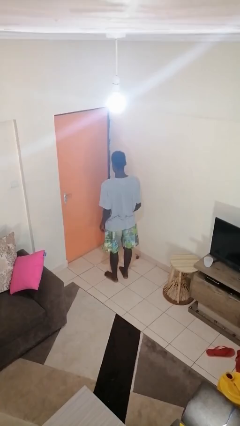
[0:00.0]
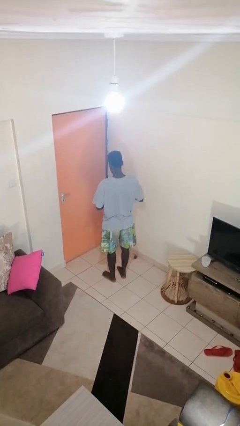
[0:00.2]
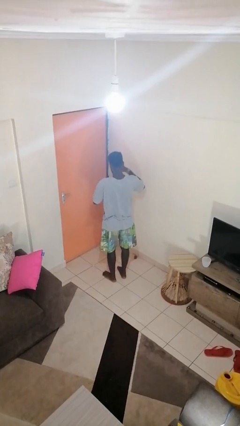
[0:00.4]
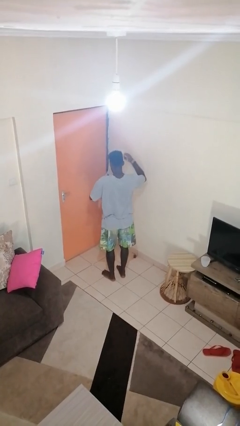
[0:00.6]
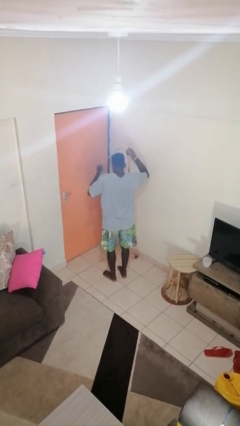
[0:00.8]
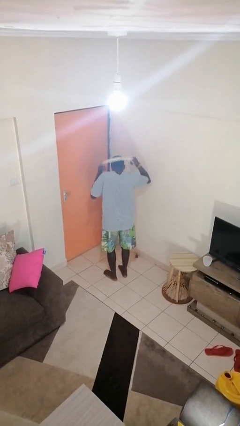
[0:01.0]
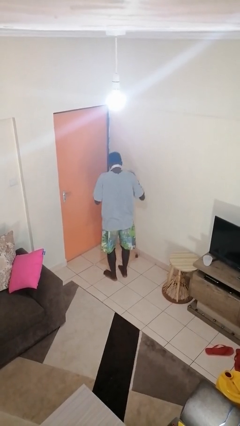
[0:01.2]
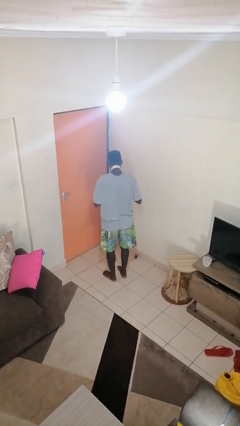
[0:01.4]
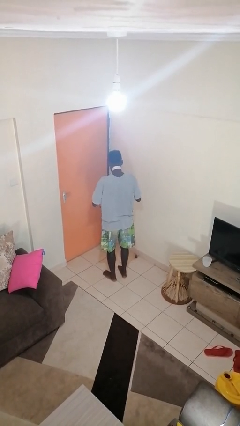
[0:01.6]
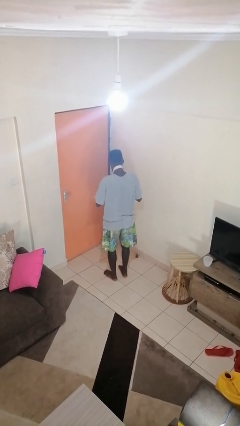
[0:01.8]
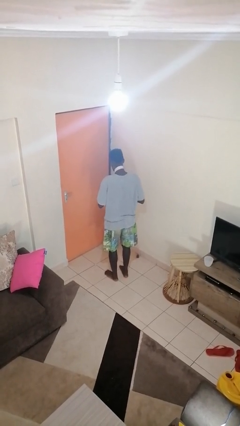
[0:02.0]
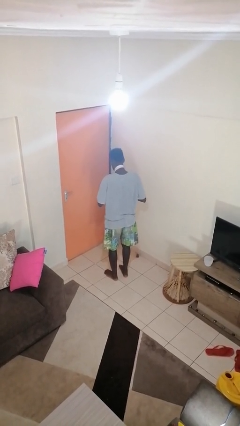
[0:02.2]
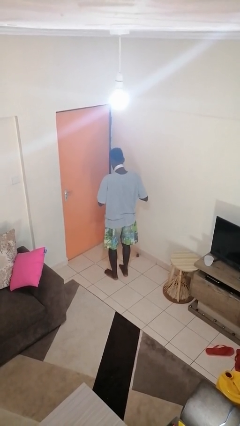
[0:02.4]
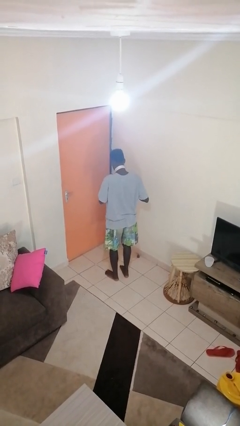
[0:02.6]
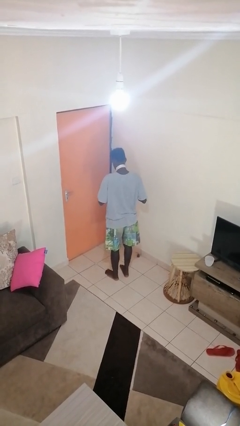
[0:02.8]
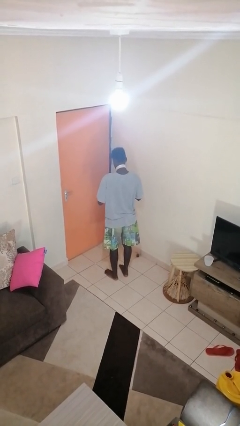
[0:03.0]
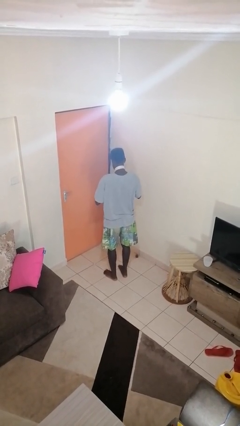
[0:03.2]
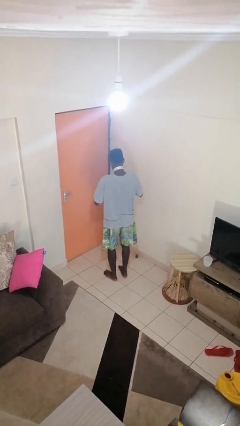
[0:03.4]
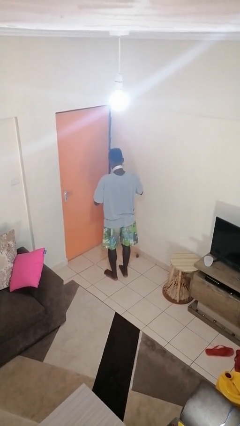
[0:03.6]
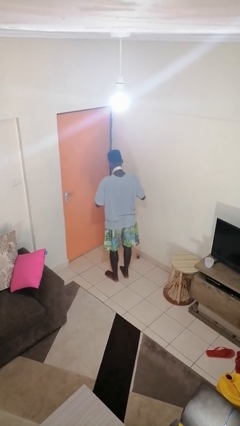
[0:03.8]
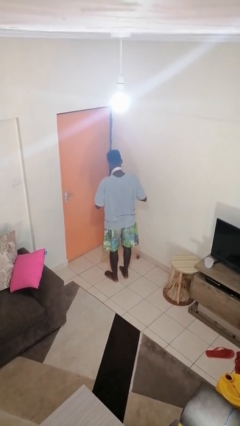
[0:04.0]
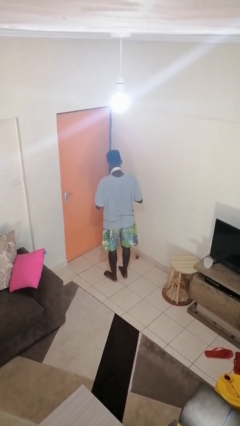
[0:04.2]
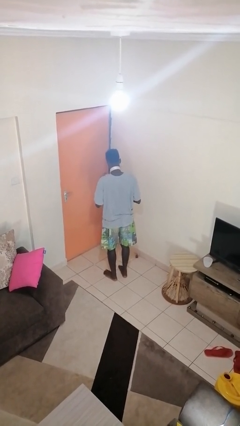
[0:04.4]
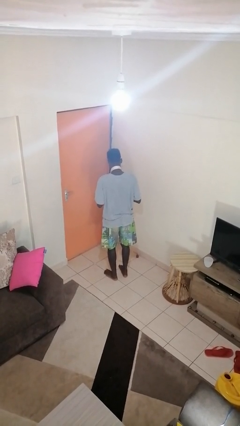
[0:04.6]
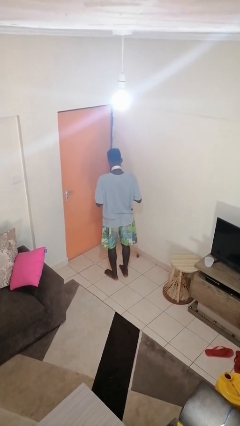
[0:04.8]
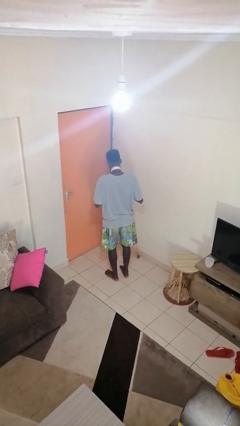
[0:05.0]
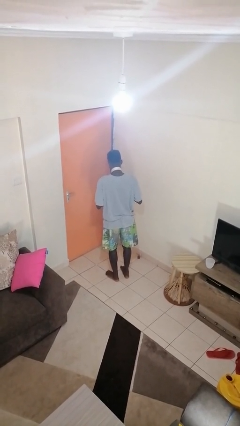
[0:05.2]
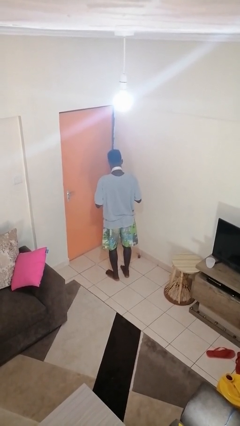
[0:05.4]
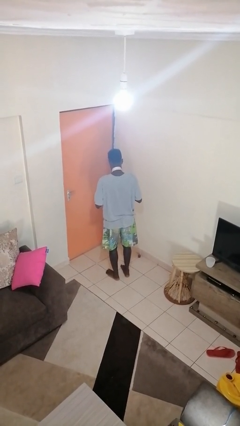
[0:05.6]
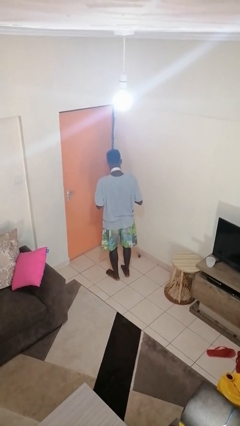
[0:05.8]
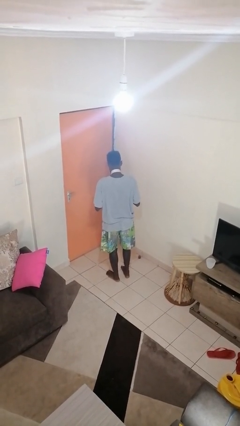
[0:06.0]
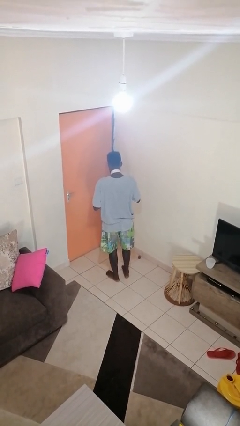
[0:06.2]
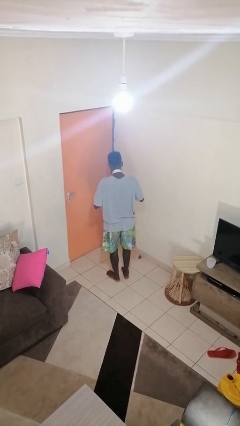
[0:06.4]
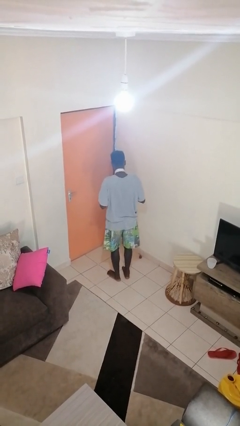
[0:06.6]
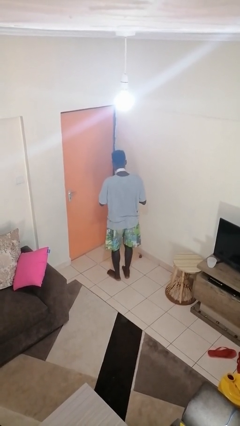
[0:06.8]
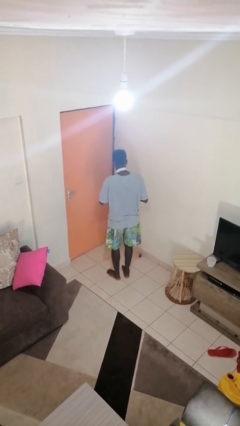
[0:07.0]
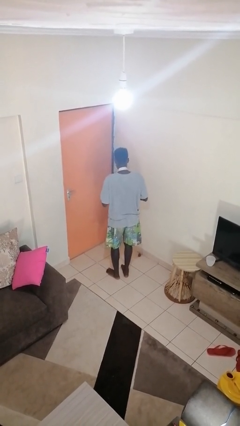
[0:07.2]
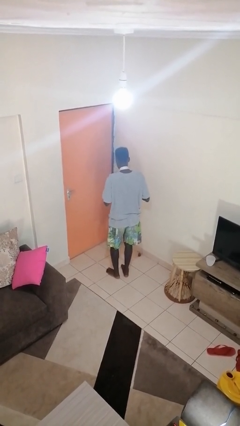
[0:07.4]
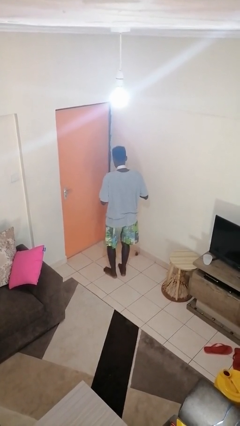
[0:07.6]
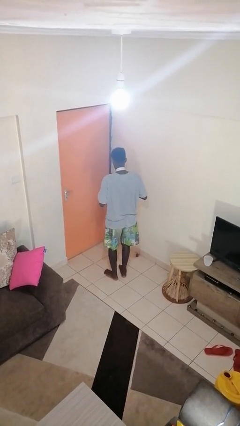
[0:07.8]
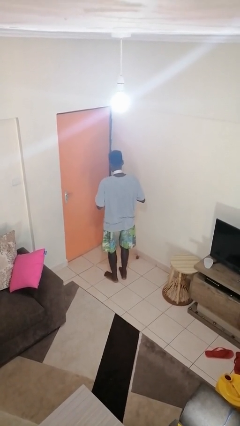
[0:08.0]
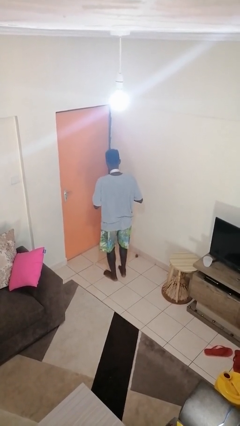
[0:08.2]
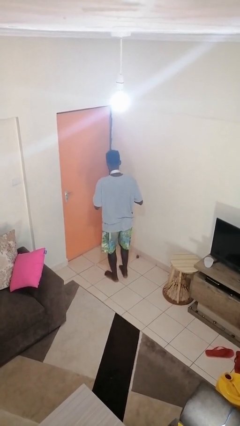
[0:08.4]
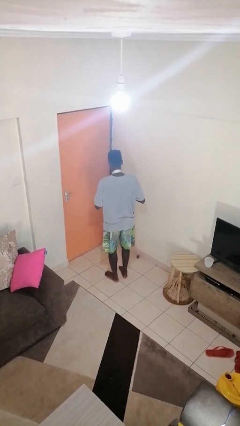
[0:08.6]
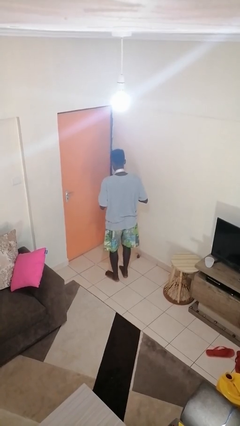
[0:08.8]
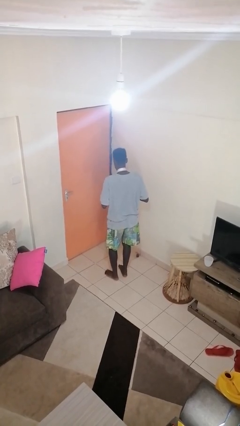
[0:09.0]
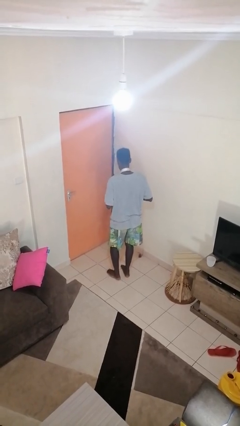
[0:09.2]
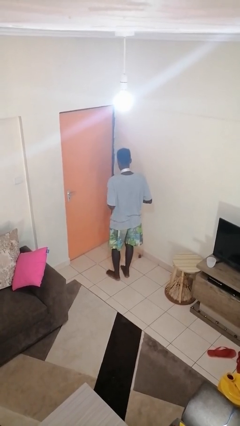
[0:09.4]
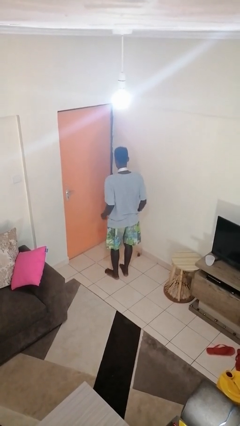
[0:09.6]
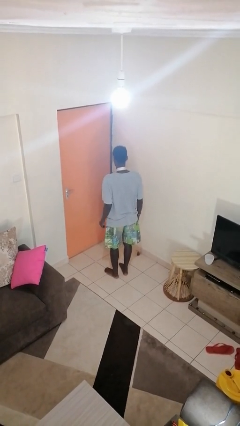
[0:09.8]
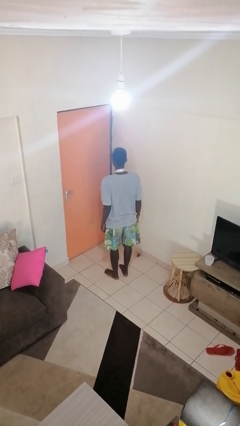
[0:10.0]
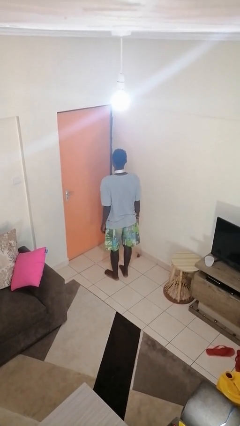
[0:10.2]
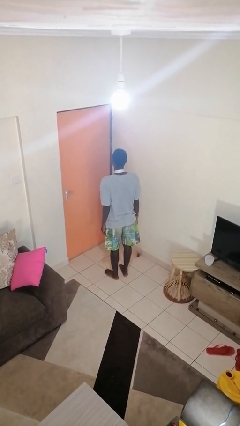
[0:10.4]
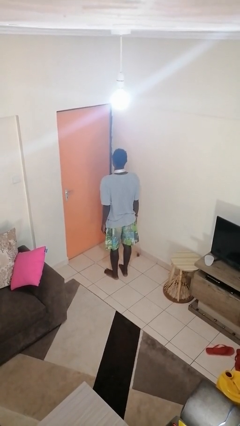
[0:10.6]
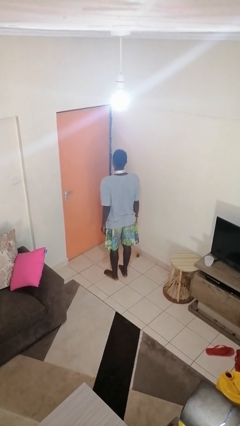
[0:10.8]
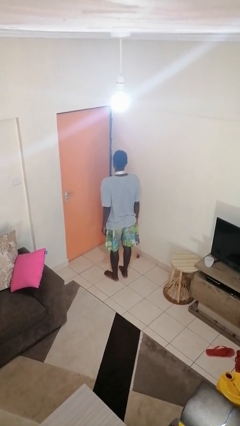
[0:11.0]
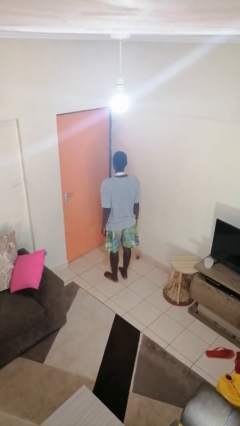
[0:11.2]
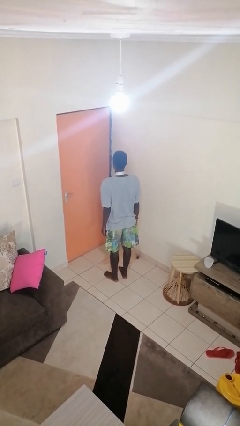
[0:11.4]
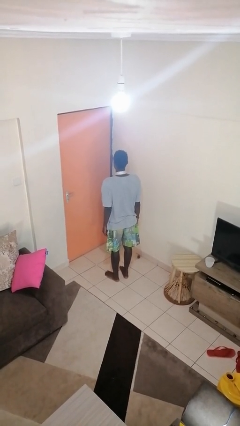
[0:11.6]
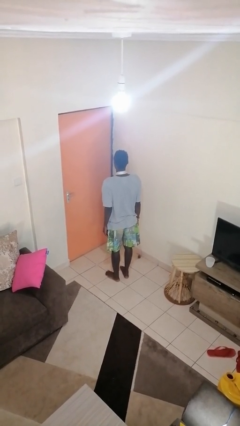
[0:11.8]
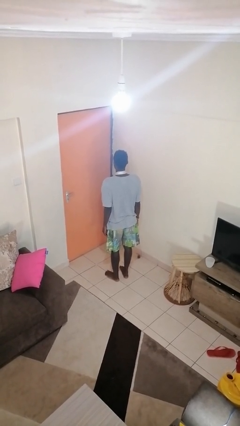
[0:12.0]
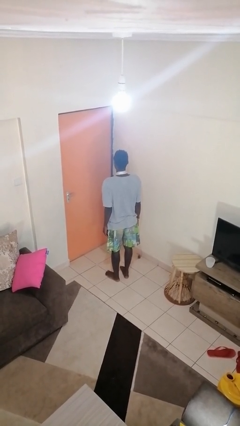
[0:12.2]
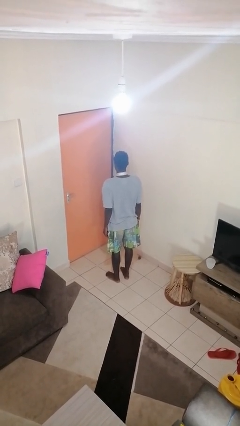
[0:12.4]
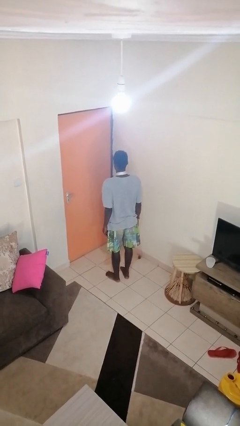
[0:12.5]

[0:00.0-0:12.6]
person puts on necktie

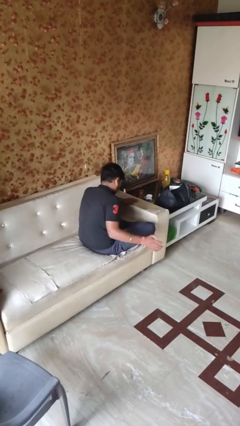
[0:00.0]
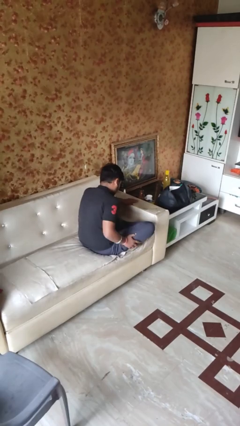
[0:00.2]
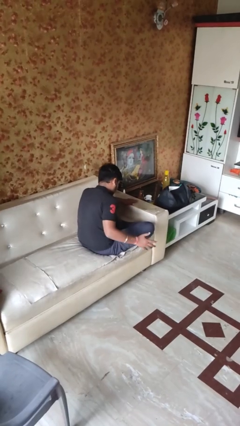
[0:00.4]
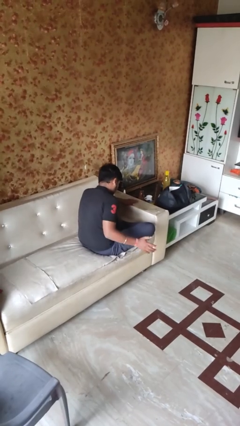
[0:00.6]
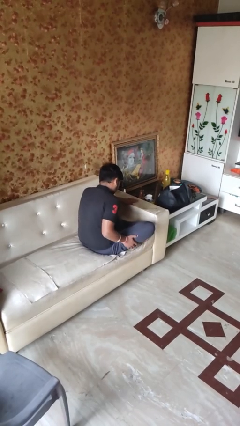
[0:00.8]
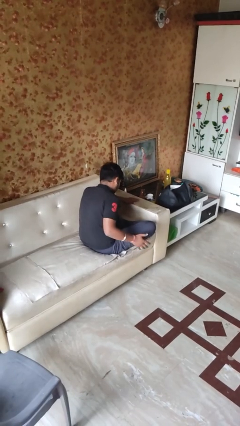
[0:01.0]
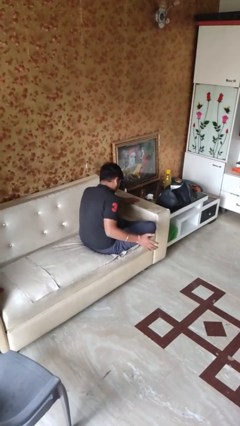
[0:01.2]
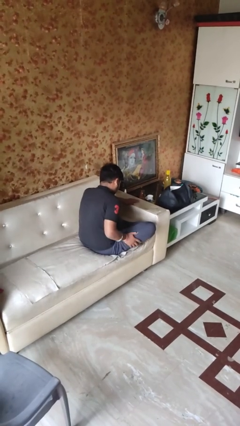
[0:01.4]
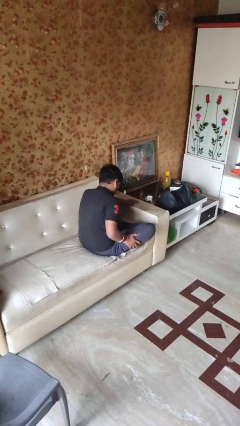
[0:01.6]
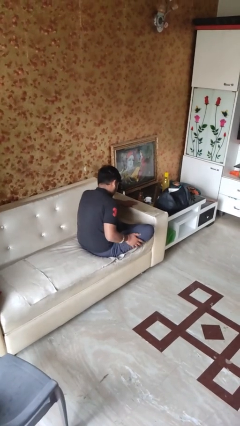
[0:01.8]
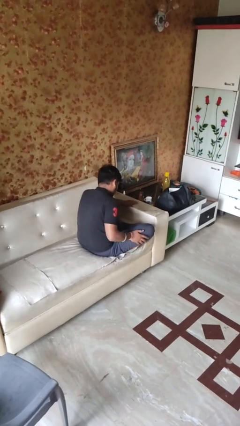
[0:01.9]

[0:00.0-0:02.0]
person slaps hands on thighs

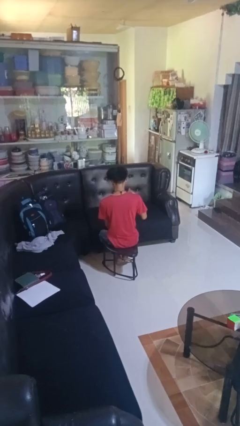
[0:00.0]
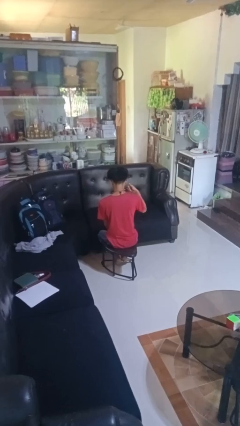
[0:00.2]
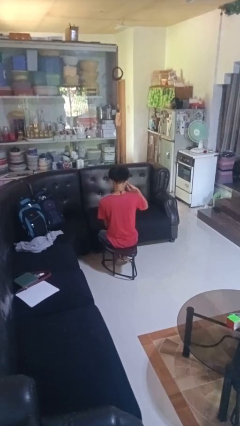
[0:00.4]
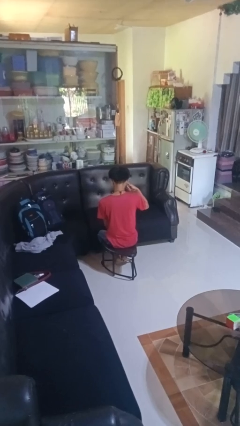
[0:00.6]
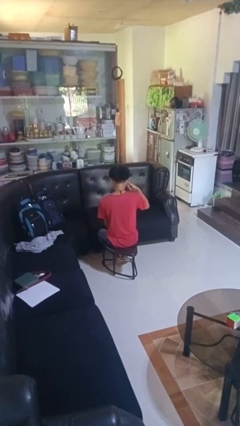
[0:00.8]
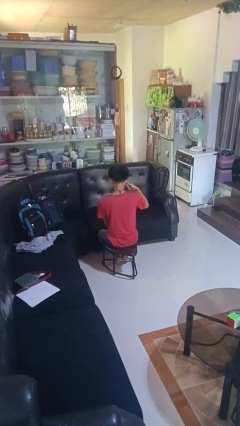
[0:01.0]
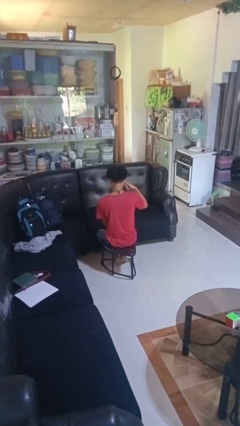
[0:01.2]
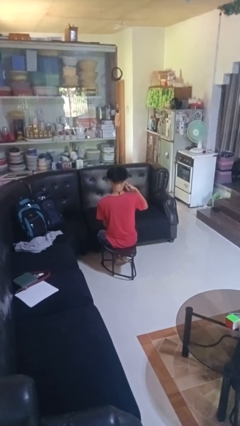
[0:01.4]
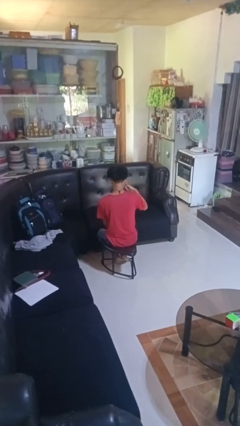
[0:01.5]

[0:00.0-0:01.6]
person gestures call me

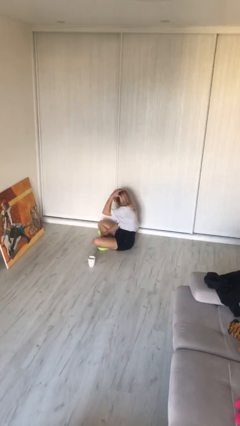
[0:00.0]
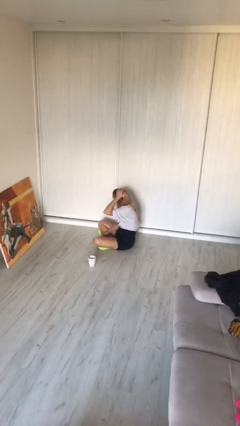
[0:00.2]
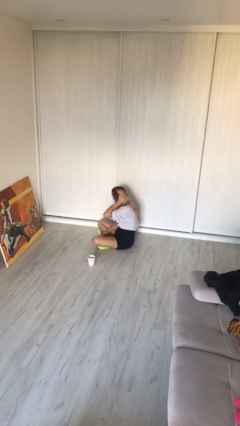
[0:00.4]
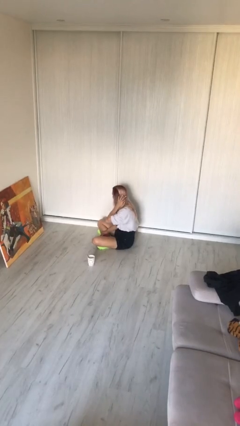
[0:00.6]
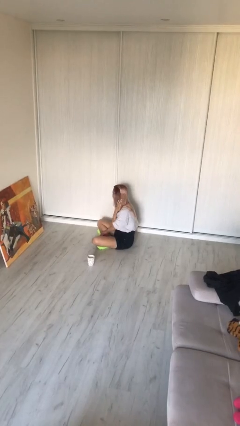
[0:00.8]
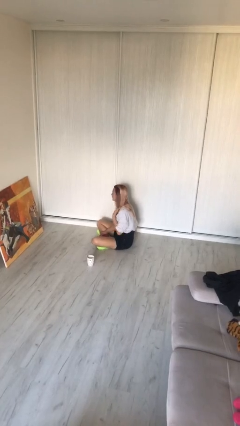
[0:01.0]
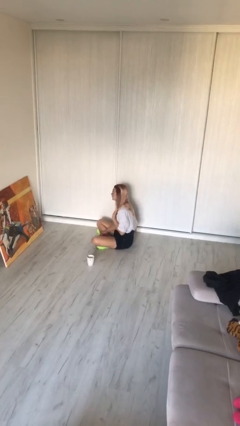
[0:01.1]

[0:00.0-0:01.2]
person strokes hair

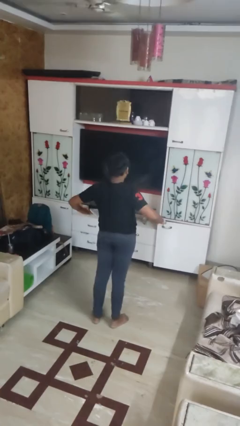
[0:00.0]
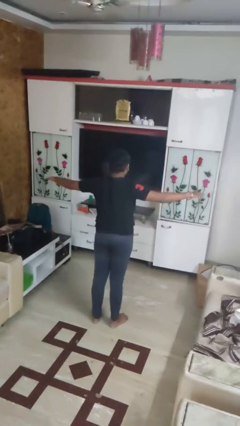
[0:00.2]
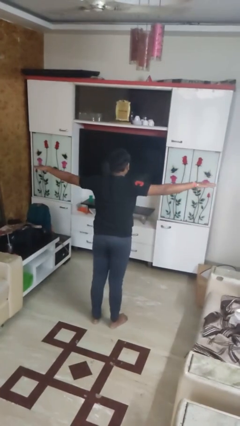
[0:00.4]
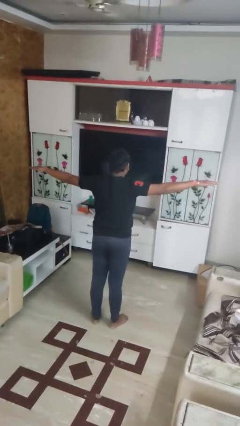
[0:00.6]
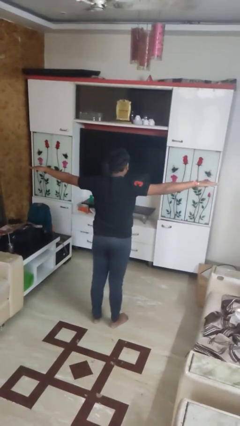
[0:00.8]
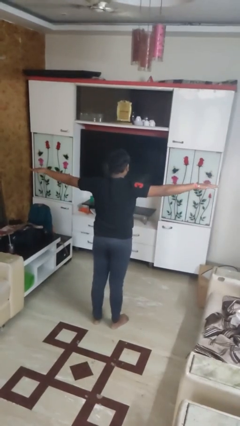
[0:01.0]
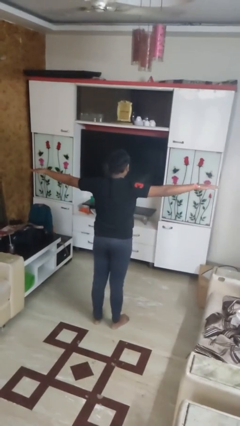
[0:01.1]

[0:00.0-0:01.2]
person stretches arms to side
